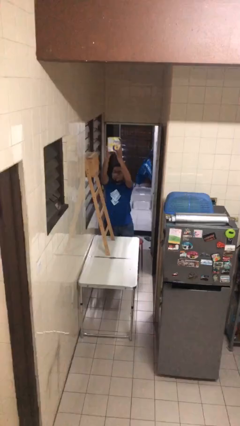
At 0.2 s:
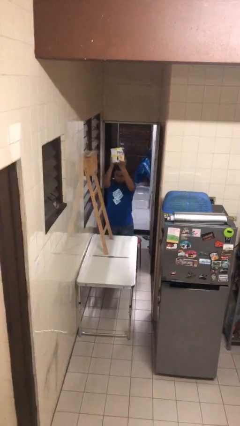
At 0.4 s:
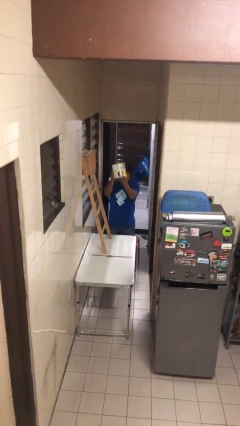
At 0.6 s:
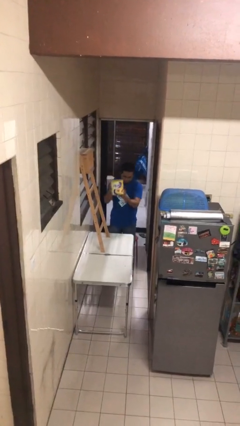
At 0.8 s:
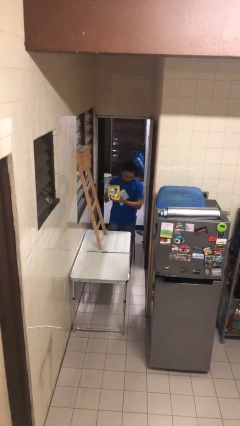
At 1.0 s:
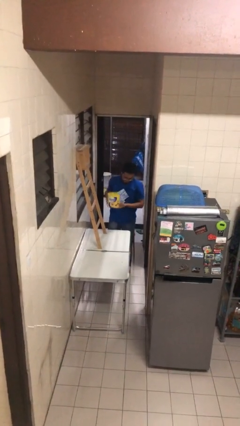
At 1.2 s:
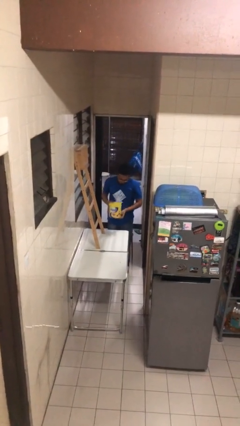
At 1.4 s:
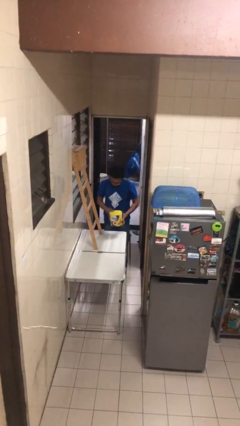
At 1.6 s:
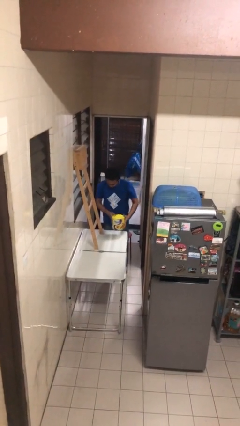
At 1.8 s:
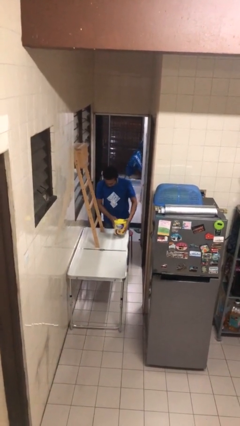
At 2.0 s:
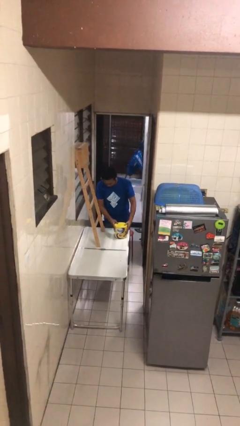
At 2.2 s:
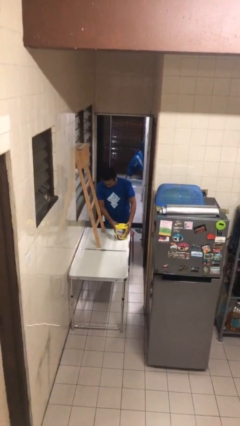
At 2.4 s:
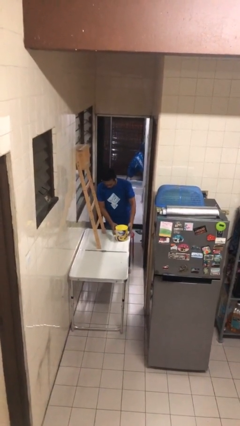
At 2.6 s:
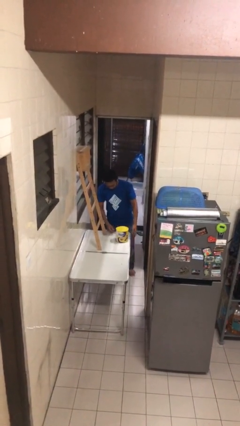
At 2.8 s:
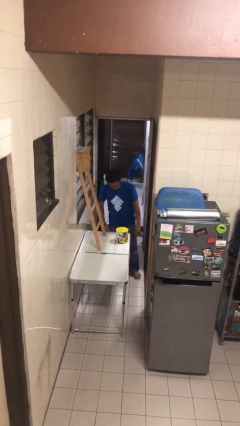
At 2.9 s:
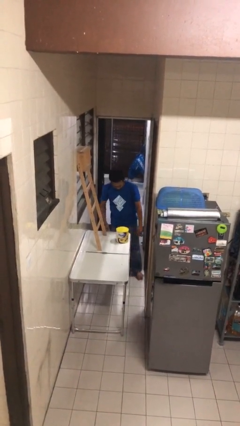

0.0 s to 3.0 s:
person puts down object on table

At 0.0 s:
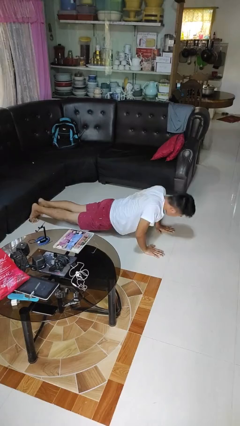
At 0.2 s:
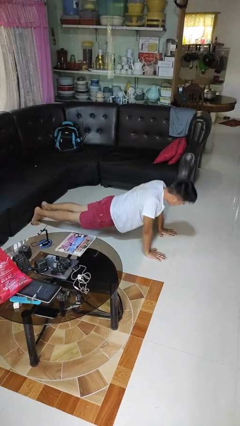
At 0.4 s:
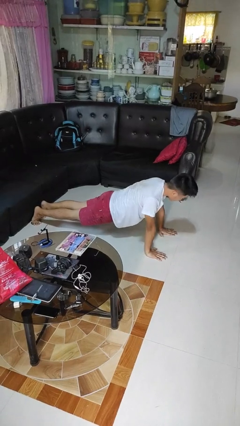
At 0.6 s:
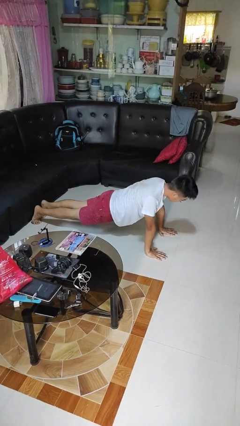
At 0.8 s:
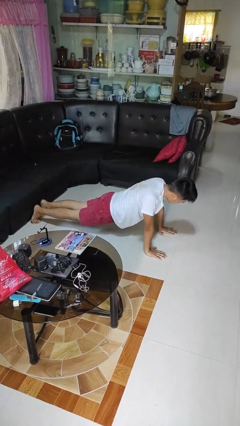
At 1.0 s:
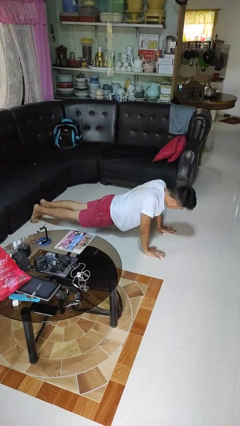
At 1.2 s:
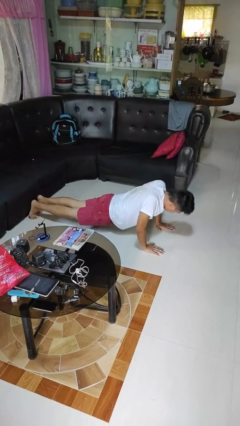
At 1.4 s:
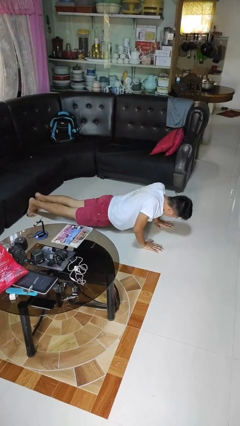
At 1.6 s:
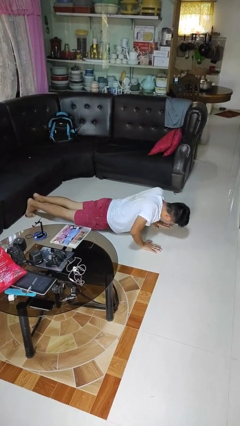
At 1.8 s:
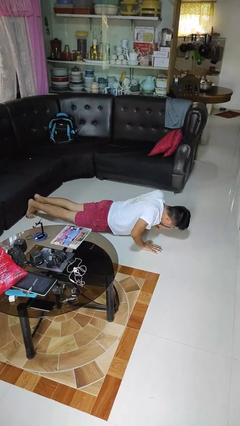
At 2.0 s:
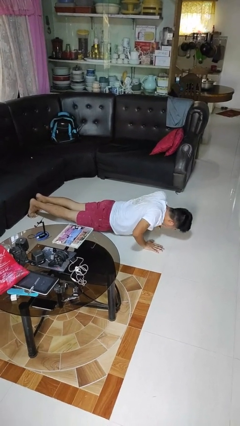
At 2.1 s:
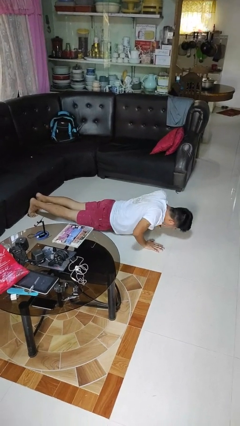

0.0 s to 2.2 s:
person exercises with pushup

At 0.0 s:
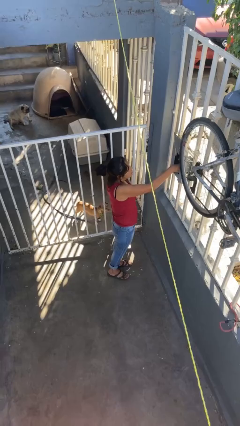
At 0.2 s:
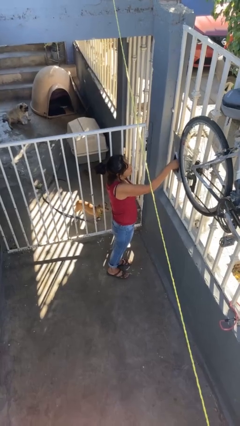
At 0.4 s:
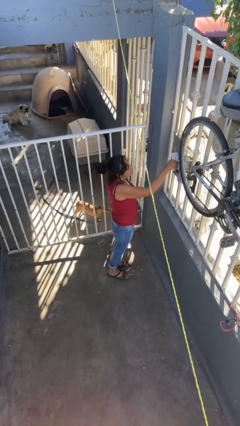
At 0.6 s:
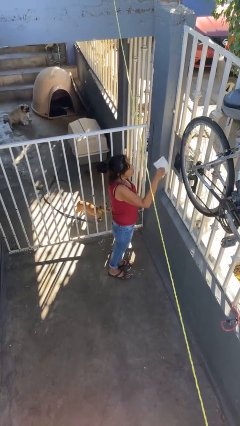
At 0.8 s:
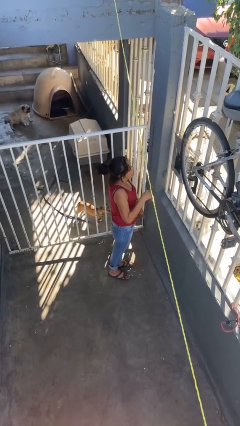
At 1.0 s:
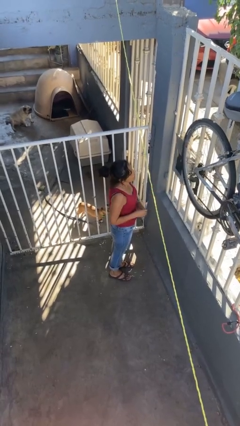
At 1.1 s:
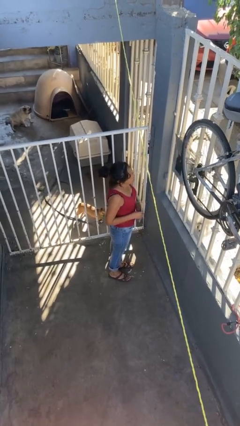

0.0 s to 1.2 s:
person takes letters from mailbox

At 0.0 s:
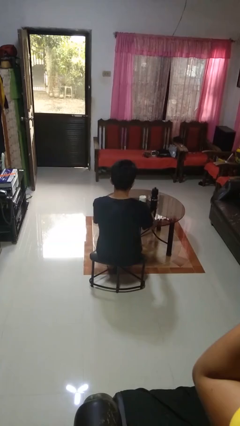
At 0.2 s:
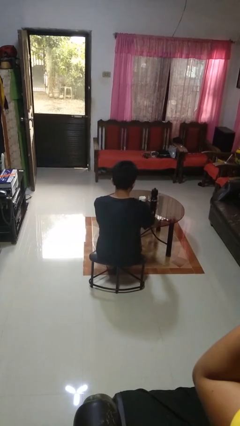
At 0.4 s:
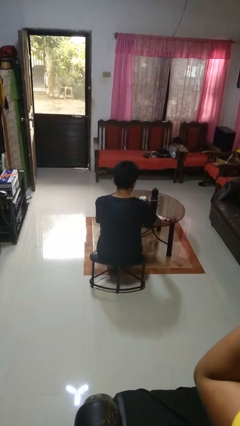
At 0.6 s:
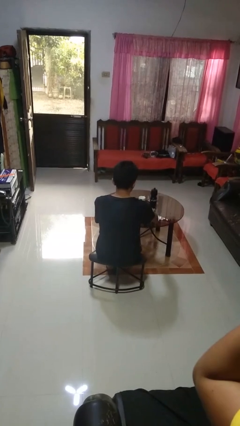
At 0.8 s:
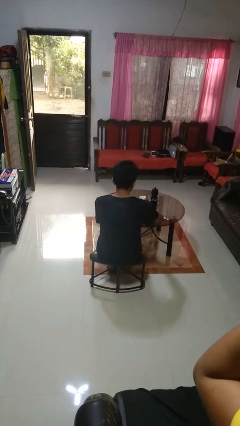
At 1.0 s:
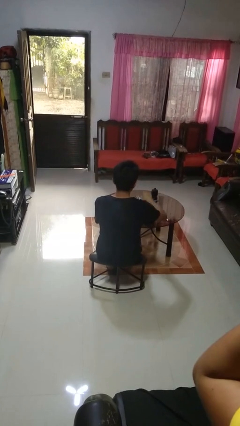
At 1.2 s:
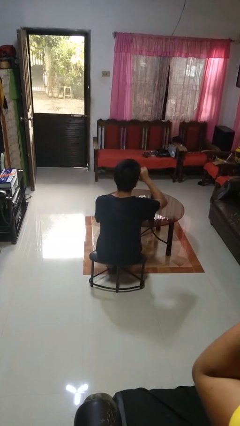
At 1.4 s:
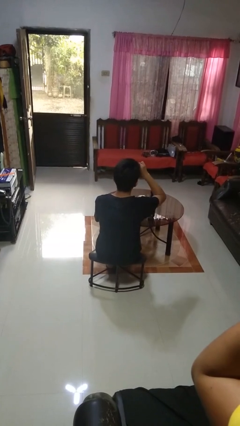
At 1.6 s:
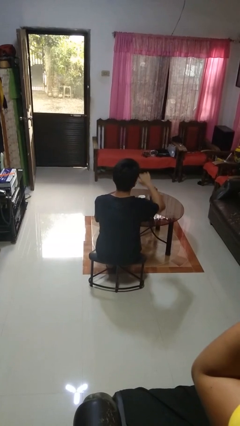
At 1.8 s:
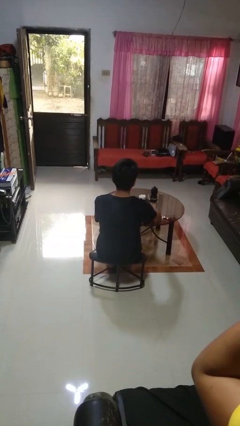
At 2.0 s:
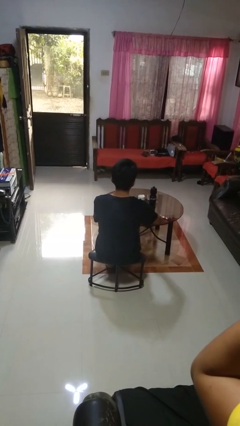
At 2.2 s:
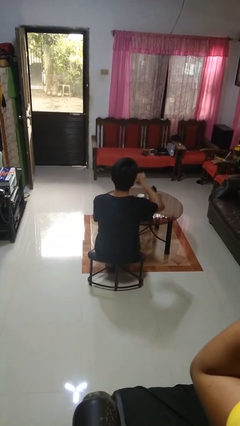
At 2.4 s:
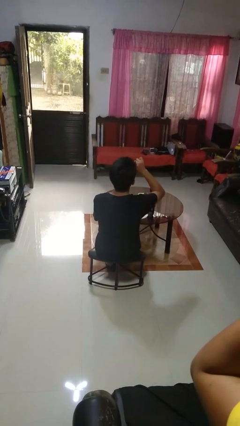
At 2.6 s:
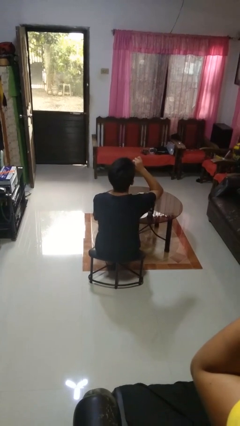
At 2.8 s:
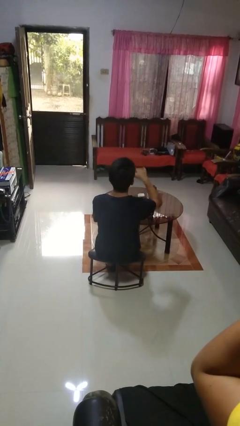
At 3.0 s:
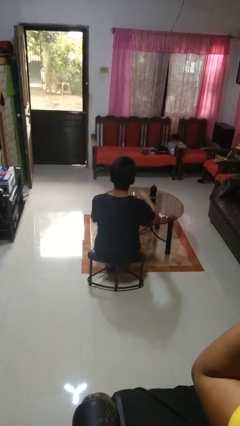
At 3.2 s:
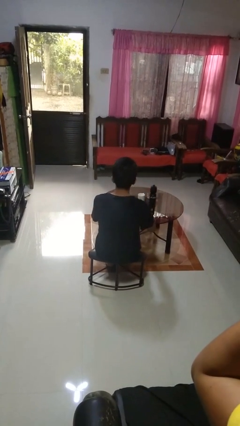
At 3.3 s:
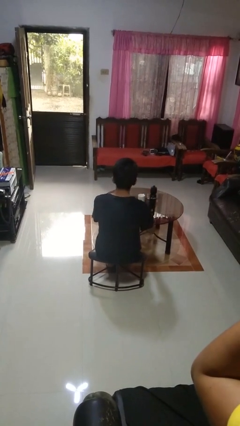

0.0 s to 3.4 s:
person eats with utensil

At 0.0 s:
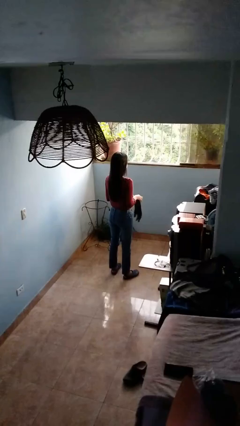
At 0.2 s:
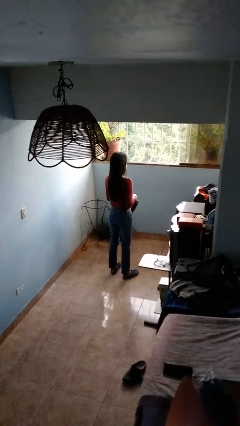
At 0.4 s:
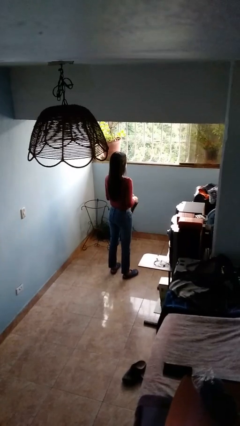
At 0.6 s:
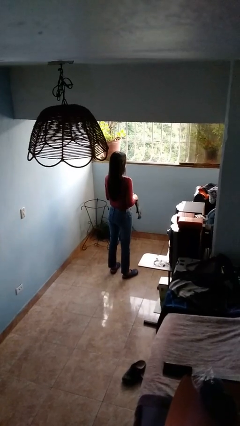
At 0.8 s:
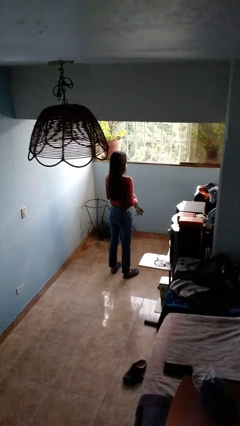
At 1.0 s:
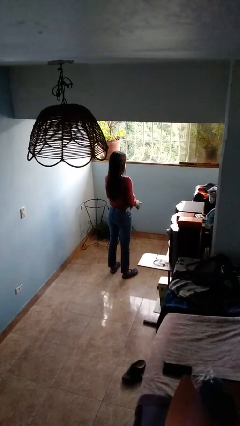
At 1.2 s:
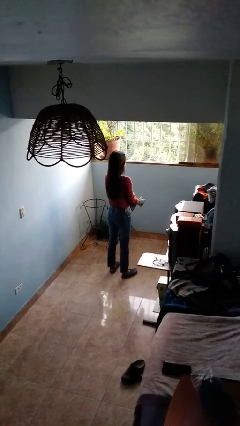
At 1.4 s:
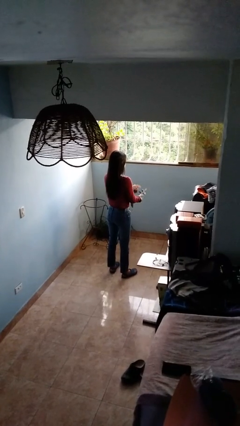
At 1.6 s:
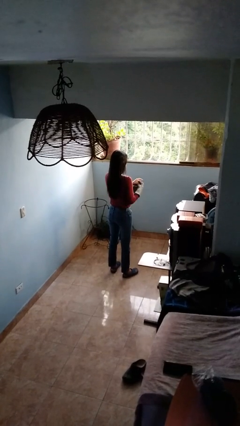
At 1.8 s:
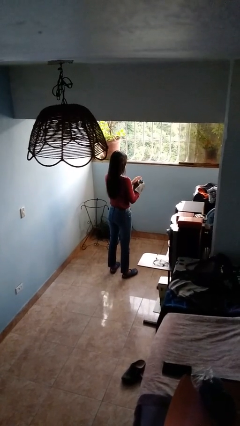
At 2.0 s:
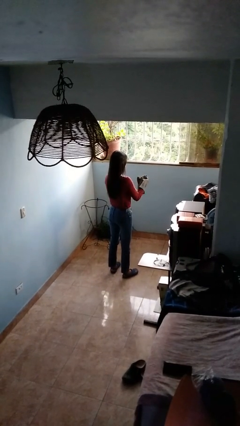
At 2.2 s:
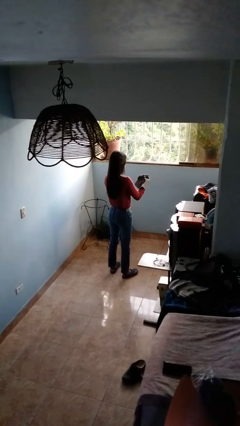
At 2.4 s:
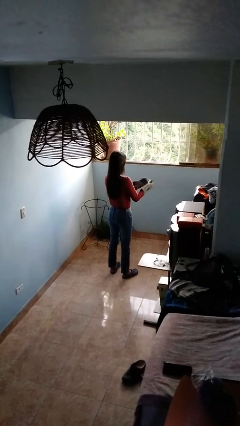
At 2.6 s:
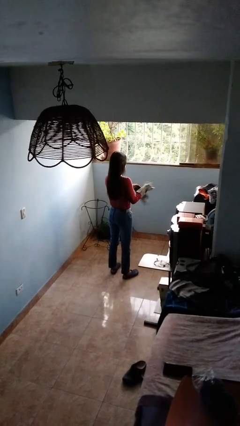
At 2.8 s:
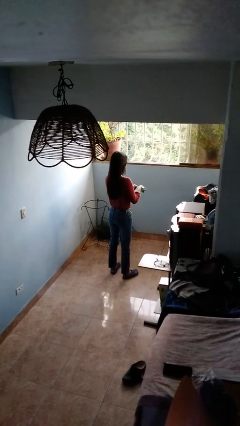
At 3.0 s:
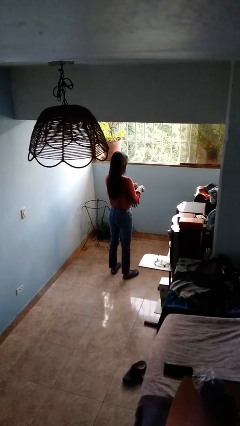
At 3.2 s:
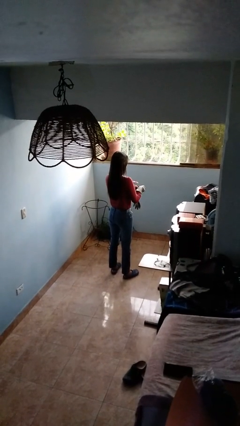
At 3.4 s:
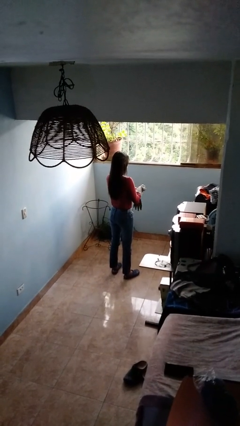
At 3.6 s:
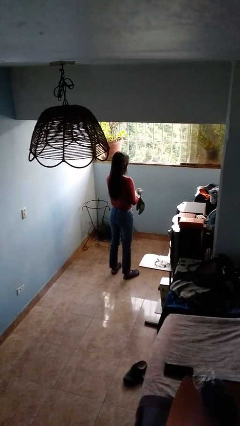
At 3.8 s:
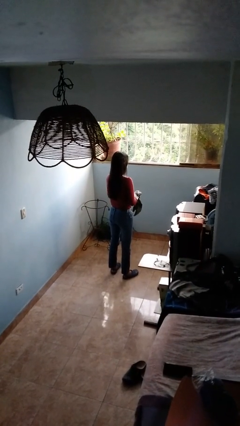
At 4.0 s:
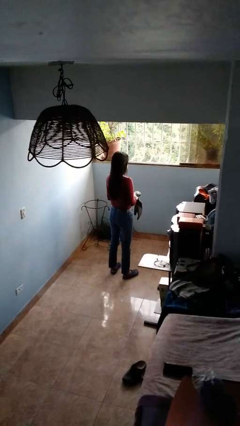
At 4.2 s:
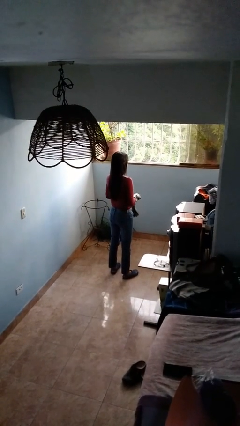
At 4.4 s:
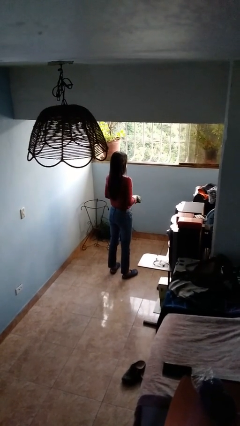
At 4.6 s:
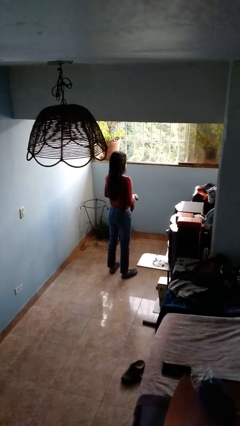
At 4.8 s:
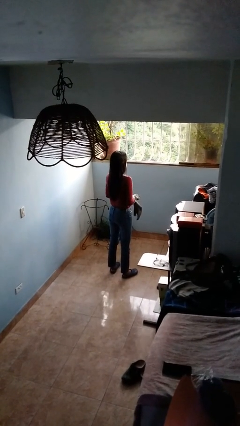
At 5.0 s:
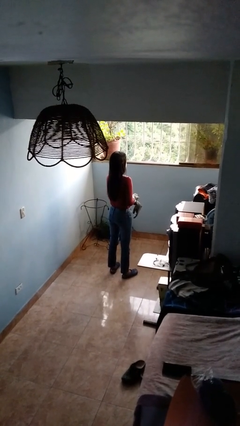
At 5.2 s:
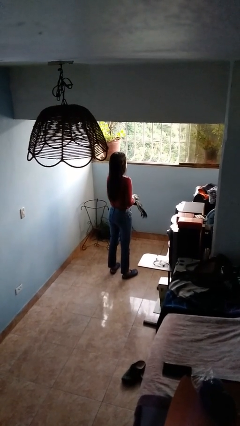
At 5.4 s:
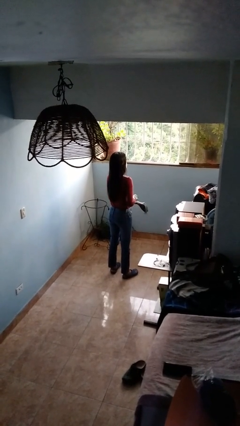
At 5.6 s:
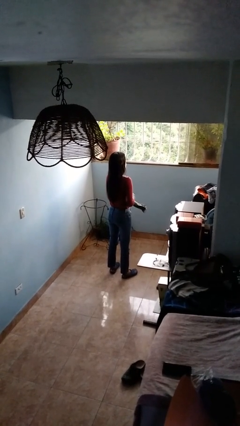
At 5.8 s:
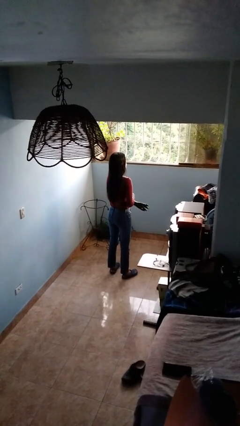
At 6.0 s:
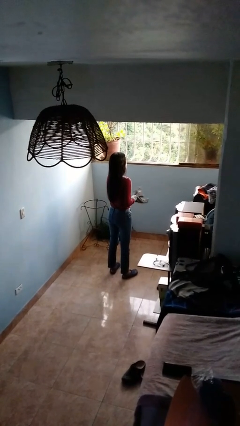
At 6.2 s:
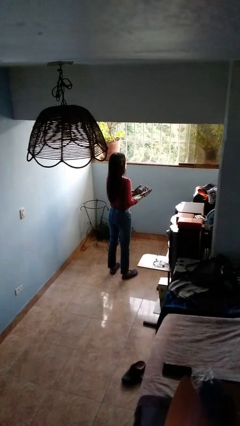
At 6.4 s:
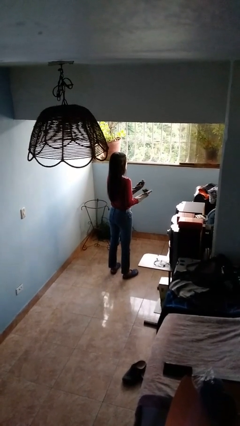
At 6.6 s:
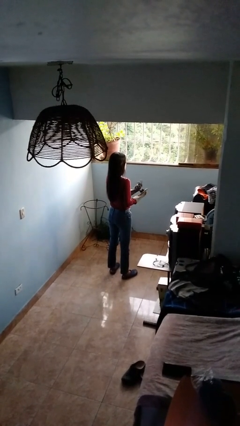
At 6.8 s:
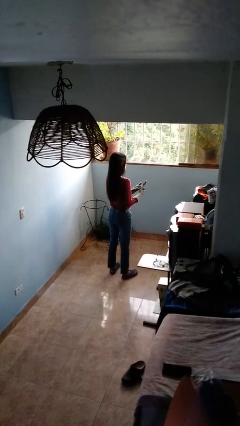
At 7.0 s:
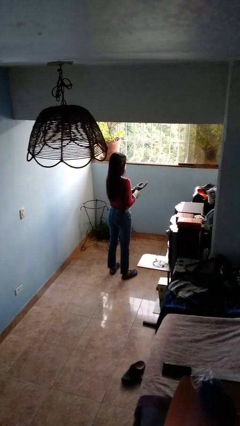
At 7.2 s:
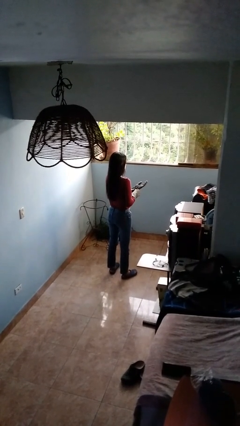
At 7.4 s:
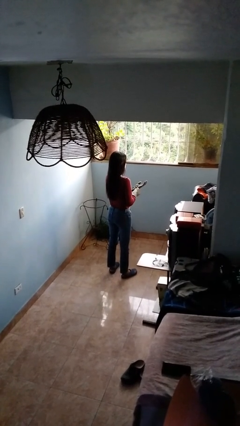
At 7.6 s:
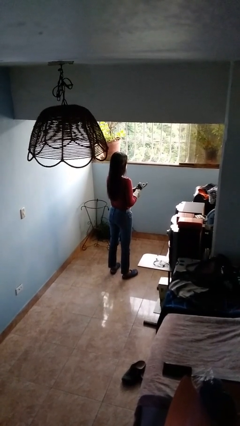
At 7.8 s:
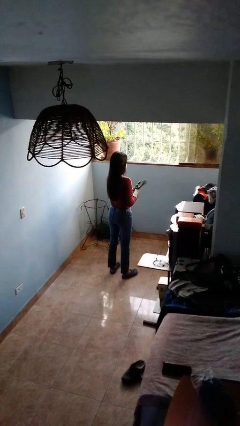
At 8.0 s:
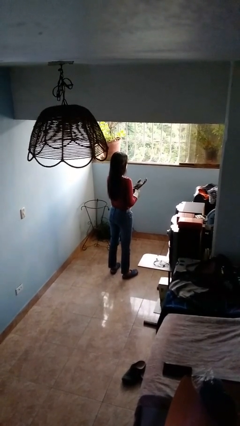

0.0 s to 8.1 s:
person puts on gloves
